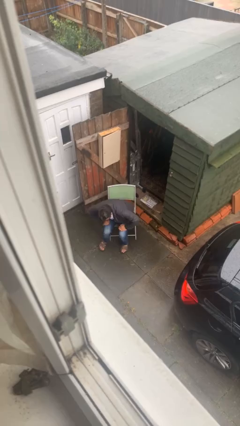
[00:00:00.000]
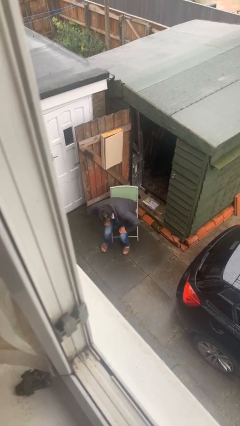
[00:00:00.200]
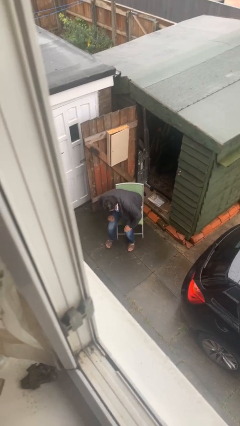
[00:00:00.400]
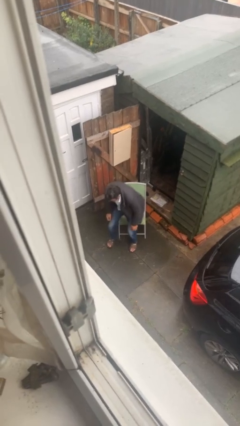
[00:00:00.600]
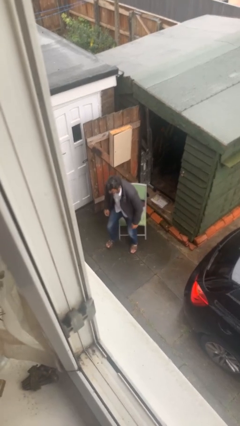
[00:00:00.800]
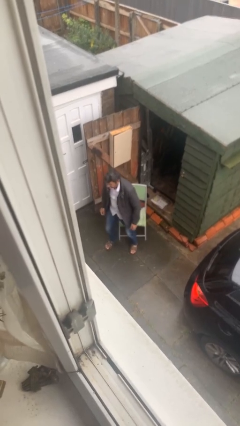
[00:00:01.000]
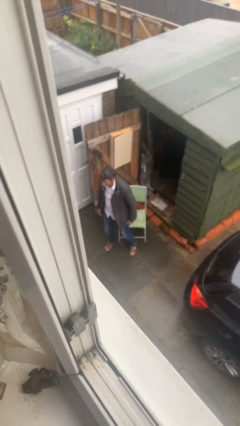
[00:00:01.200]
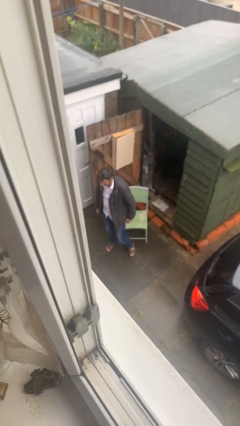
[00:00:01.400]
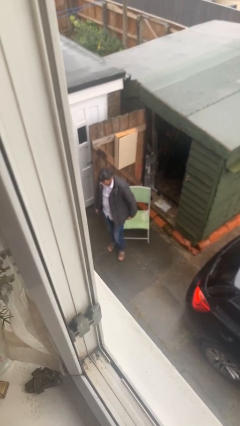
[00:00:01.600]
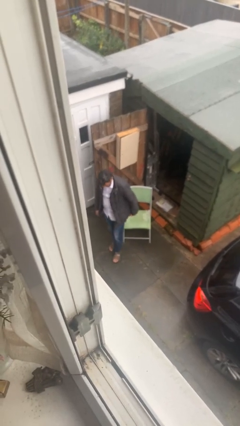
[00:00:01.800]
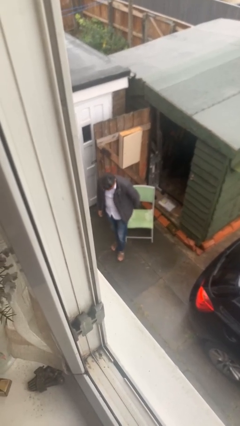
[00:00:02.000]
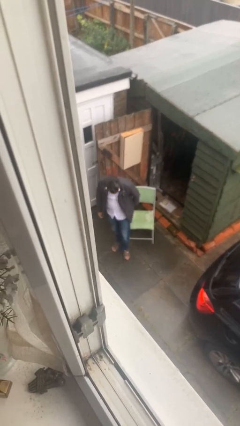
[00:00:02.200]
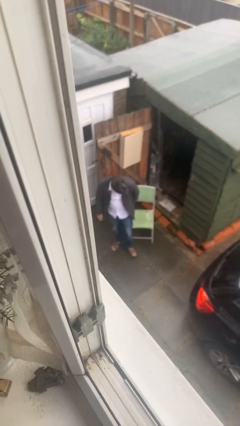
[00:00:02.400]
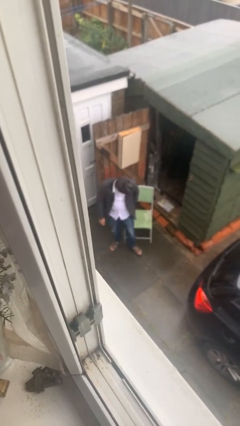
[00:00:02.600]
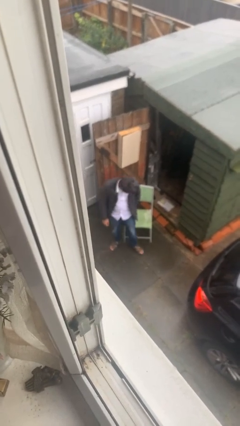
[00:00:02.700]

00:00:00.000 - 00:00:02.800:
person stands up

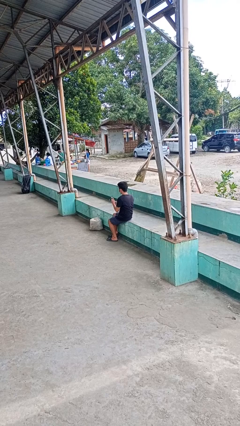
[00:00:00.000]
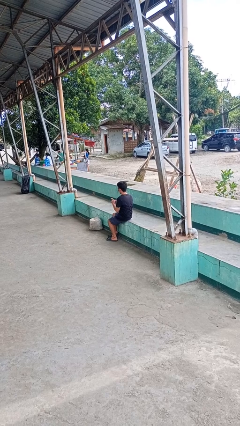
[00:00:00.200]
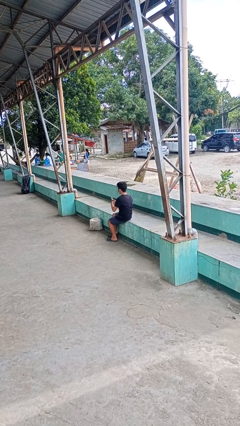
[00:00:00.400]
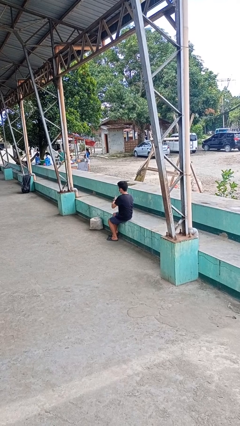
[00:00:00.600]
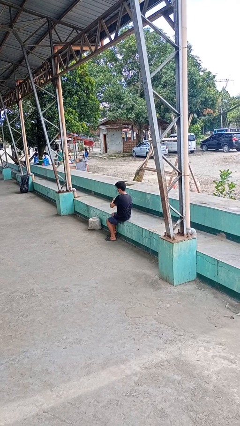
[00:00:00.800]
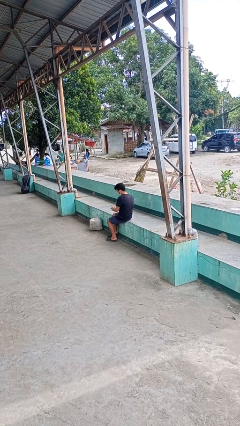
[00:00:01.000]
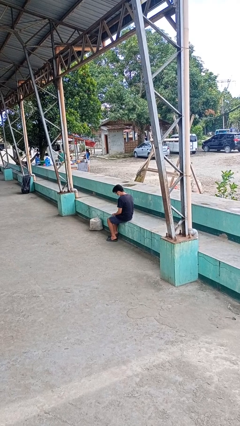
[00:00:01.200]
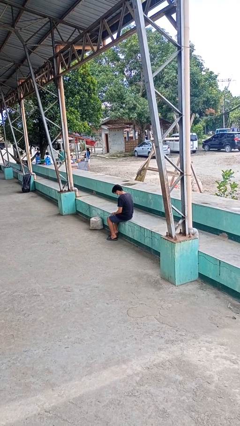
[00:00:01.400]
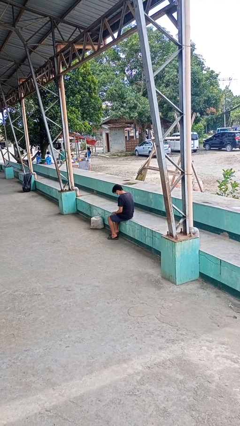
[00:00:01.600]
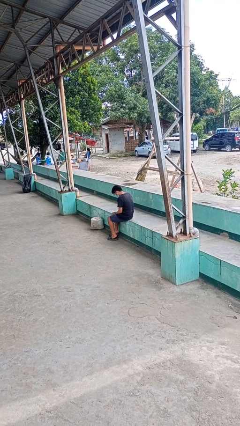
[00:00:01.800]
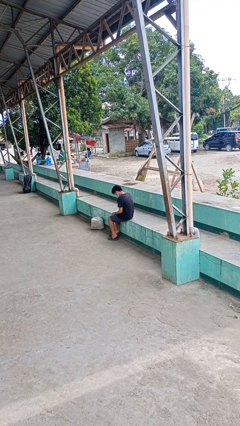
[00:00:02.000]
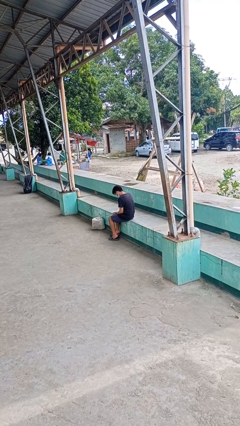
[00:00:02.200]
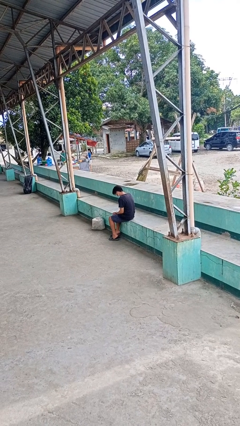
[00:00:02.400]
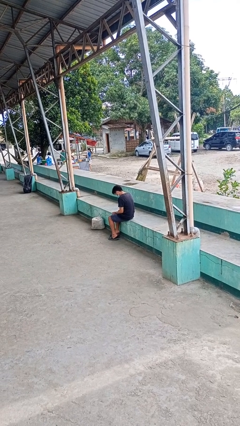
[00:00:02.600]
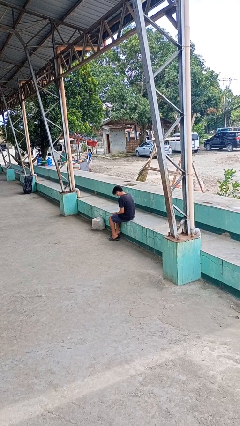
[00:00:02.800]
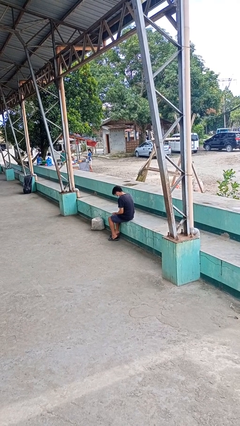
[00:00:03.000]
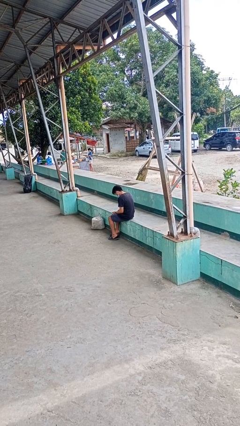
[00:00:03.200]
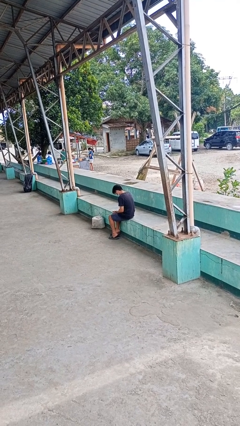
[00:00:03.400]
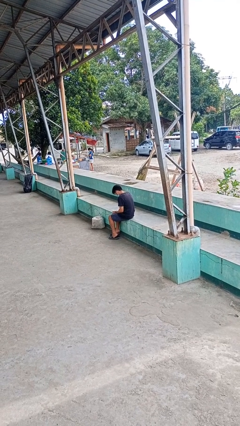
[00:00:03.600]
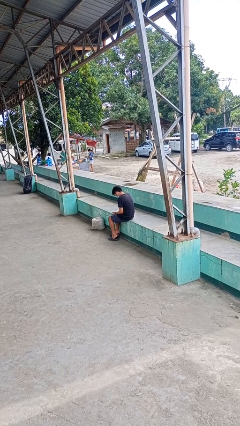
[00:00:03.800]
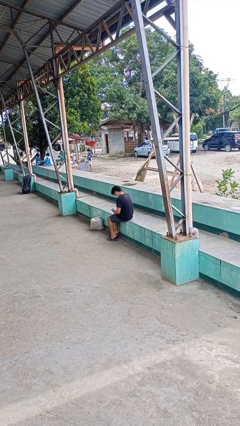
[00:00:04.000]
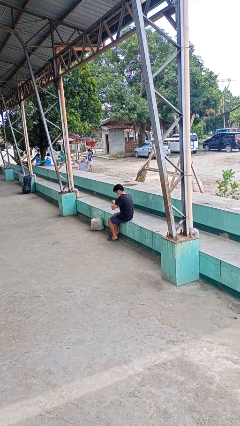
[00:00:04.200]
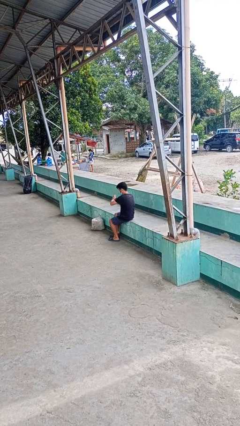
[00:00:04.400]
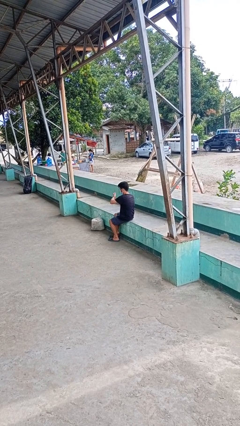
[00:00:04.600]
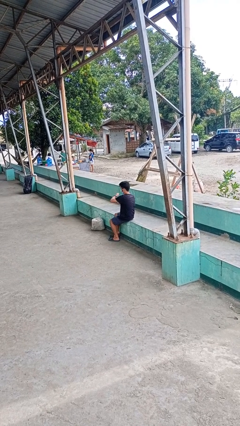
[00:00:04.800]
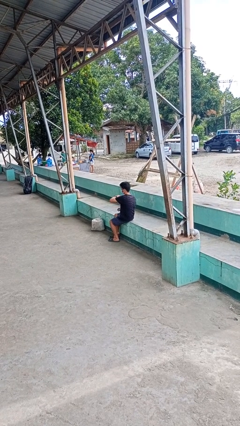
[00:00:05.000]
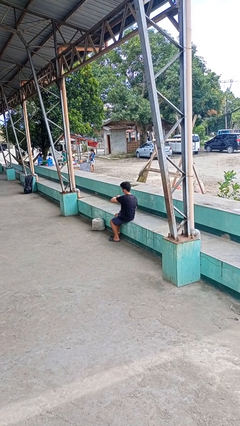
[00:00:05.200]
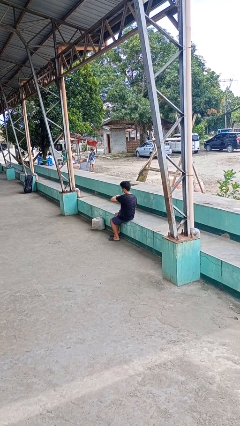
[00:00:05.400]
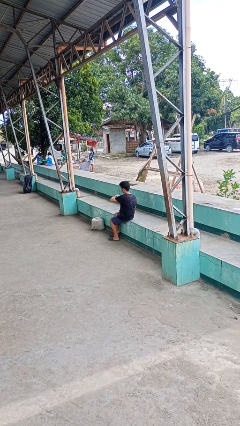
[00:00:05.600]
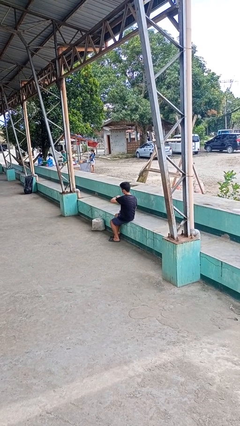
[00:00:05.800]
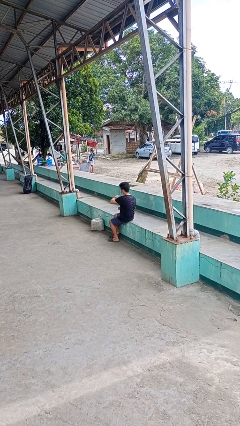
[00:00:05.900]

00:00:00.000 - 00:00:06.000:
person puts on wristwatch

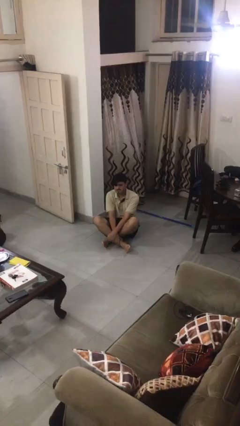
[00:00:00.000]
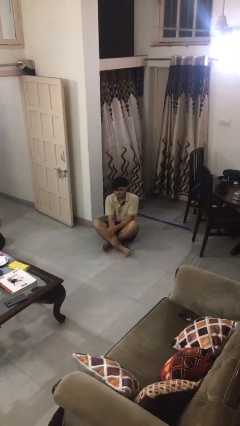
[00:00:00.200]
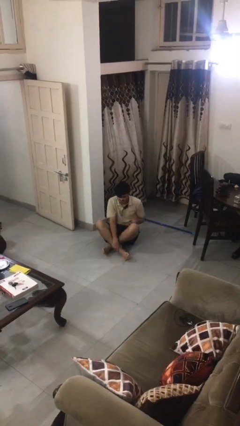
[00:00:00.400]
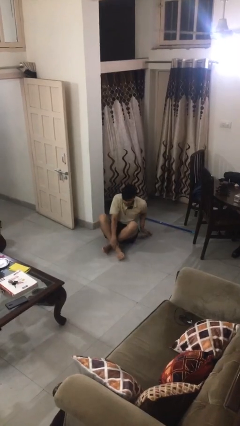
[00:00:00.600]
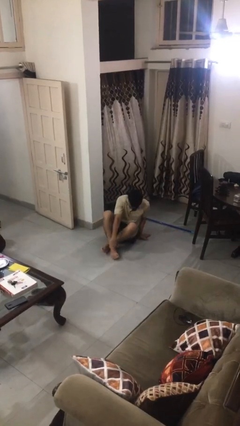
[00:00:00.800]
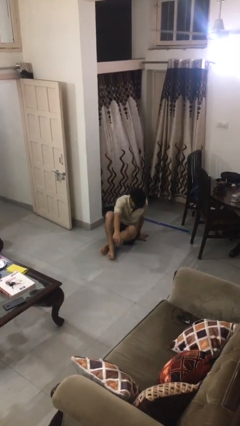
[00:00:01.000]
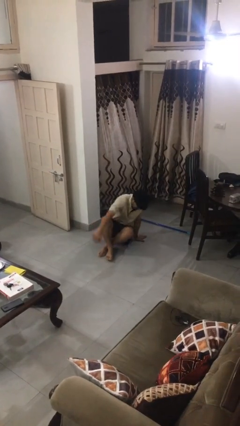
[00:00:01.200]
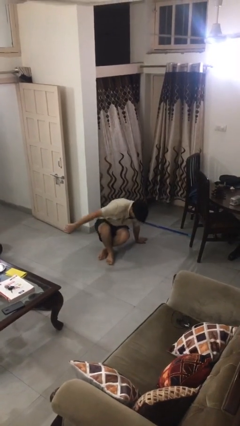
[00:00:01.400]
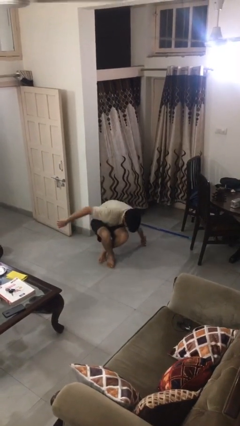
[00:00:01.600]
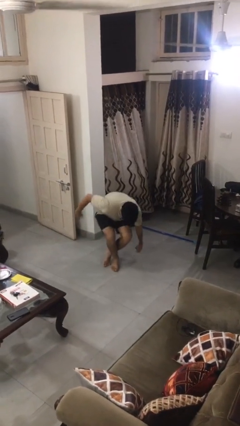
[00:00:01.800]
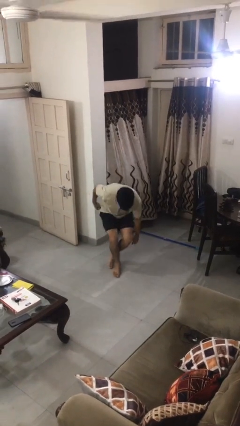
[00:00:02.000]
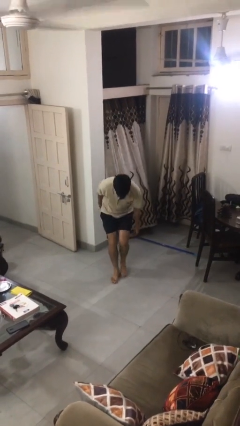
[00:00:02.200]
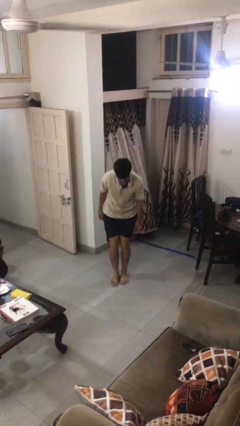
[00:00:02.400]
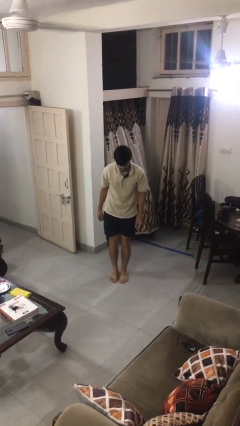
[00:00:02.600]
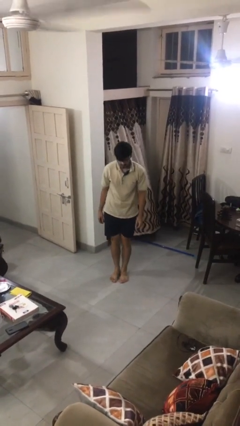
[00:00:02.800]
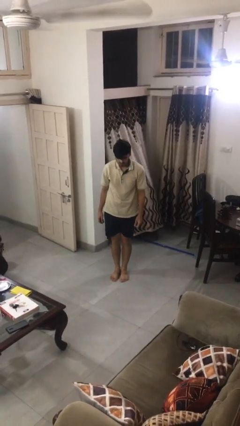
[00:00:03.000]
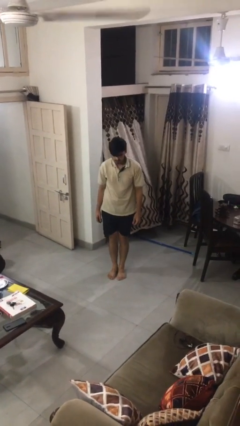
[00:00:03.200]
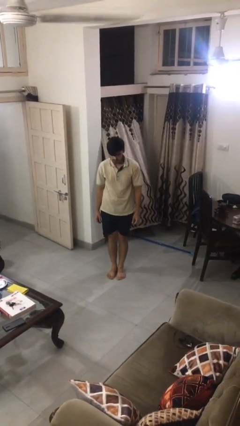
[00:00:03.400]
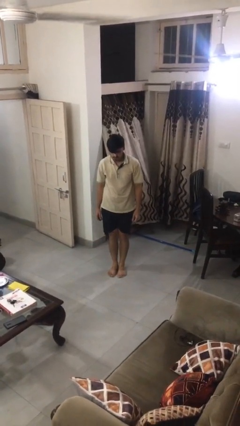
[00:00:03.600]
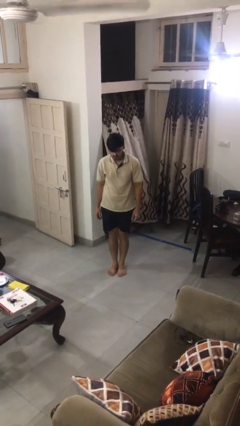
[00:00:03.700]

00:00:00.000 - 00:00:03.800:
person stands up from floor

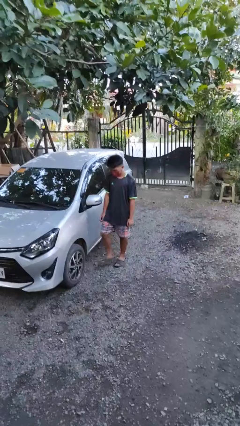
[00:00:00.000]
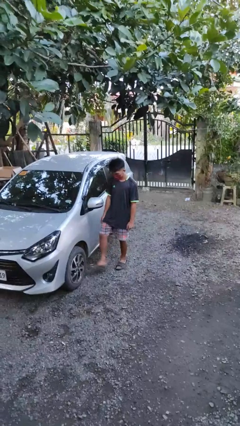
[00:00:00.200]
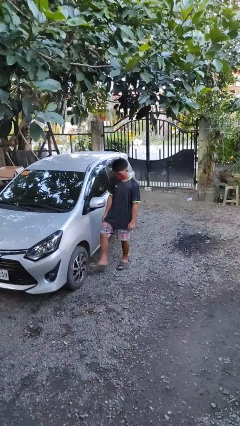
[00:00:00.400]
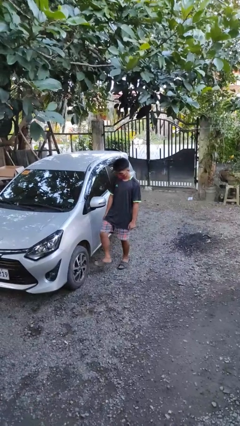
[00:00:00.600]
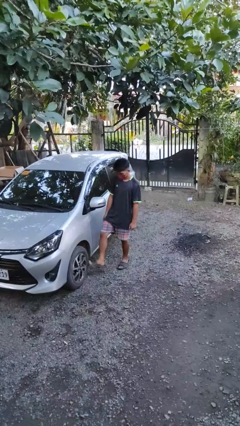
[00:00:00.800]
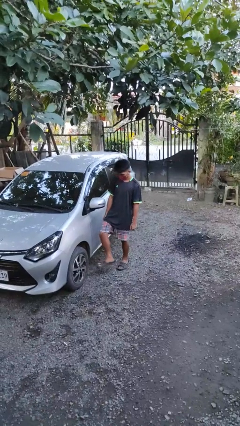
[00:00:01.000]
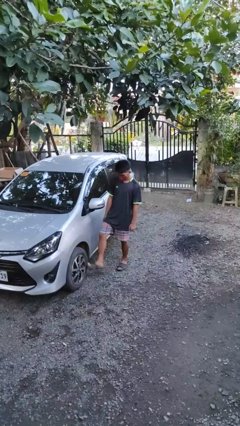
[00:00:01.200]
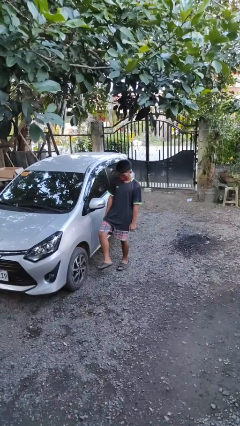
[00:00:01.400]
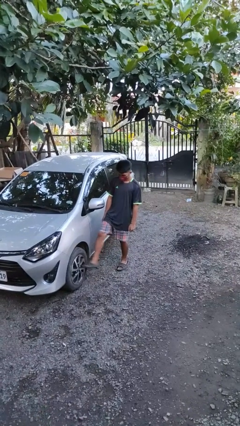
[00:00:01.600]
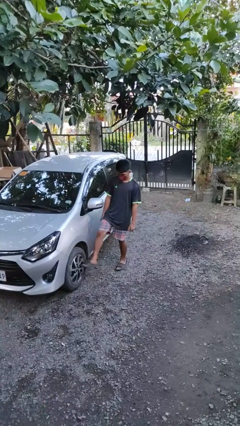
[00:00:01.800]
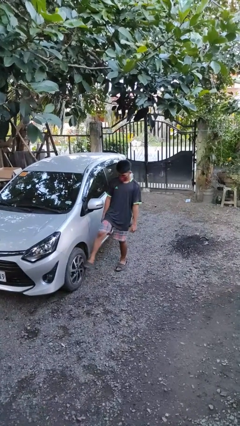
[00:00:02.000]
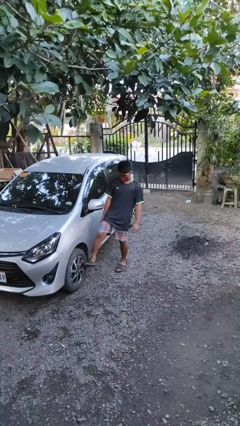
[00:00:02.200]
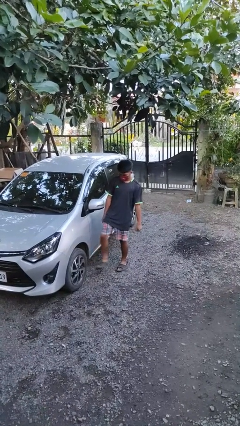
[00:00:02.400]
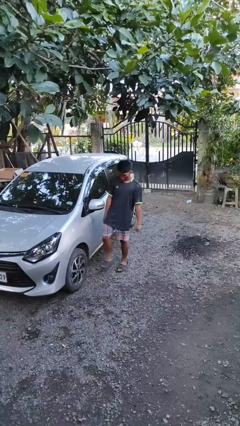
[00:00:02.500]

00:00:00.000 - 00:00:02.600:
person kicks car tires

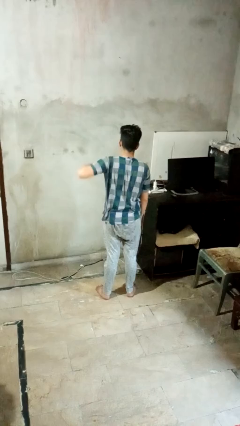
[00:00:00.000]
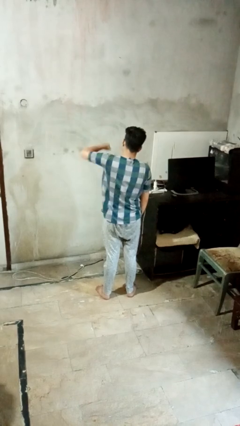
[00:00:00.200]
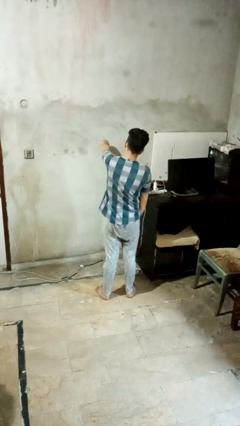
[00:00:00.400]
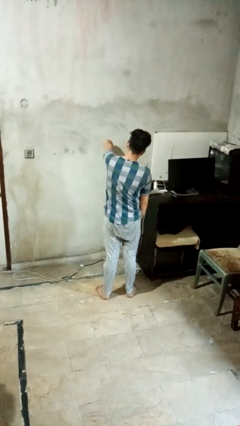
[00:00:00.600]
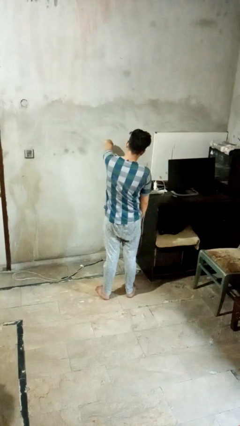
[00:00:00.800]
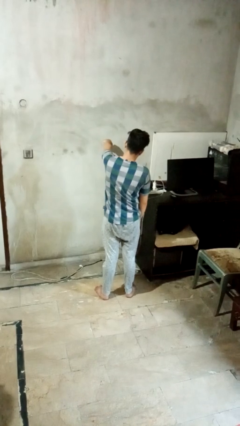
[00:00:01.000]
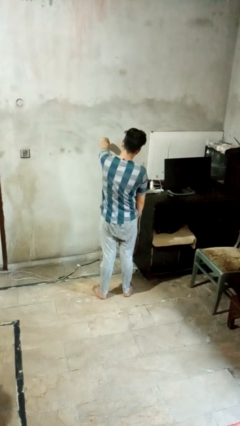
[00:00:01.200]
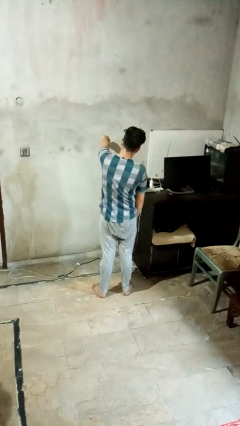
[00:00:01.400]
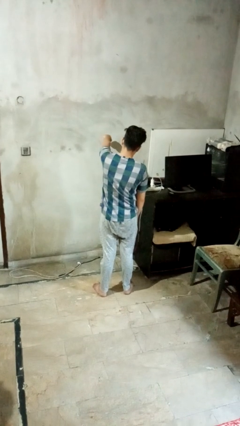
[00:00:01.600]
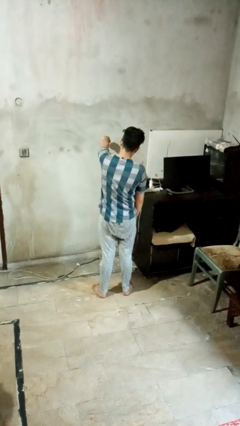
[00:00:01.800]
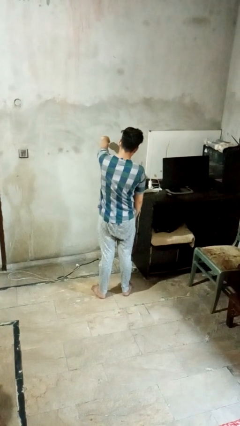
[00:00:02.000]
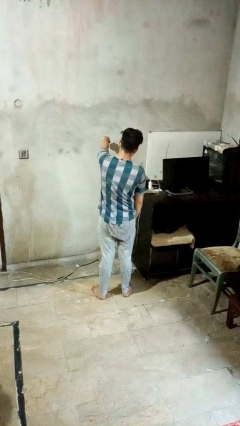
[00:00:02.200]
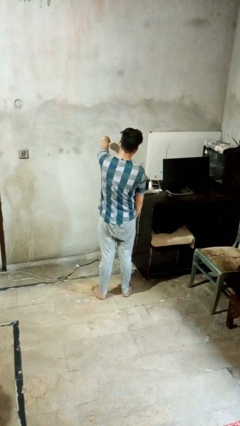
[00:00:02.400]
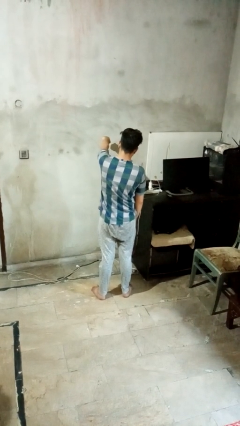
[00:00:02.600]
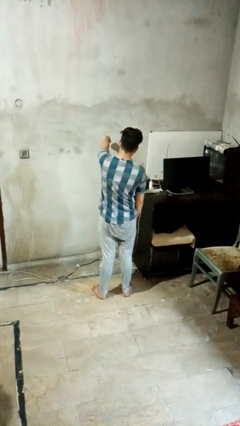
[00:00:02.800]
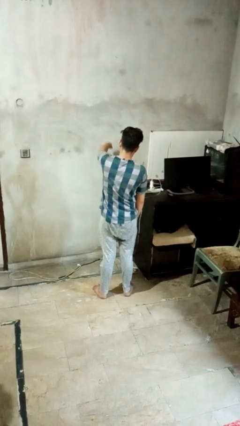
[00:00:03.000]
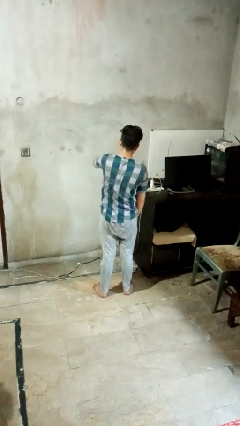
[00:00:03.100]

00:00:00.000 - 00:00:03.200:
person punches